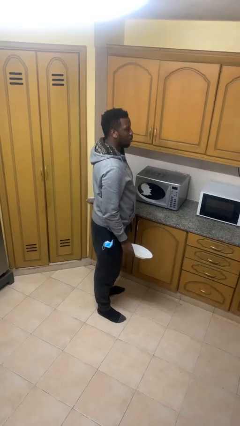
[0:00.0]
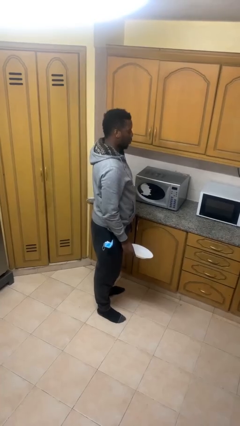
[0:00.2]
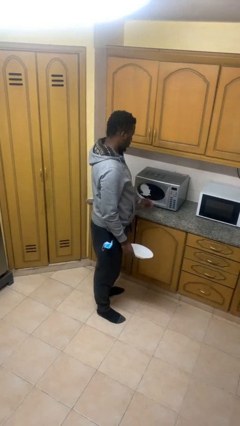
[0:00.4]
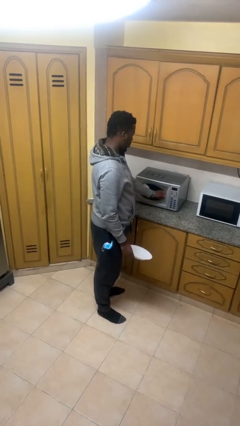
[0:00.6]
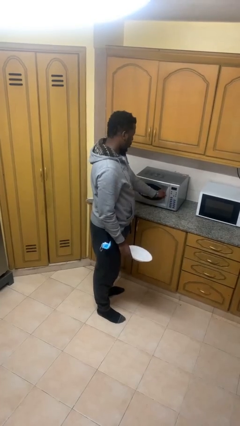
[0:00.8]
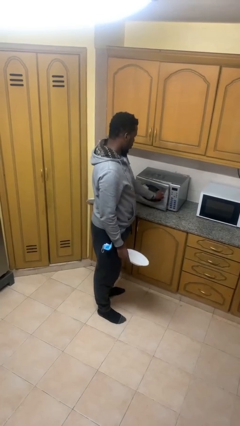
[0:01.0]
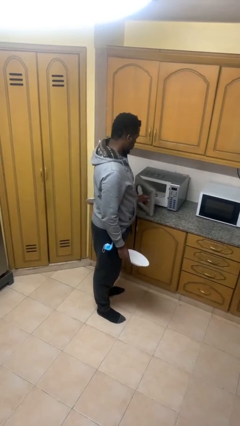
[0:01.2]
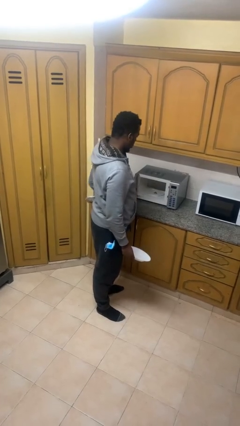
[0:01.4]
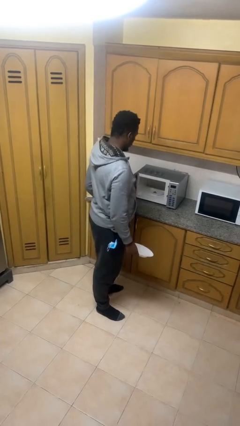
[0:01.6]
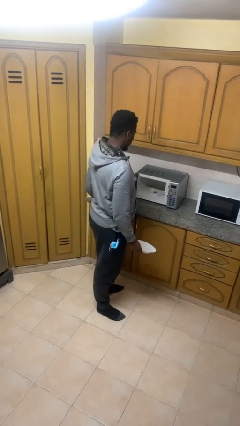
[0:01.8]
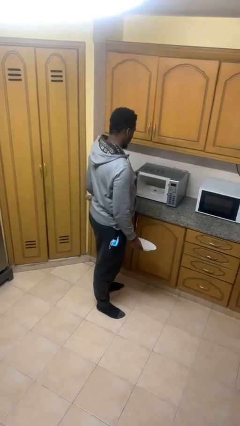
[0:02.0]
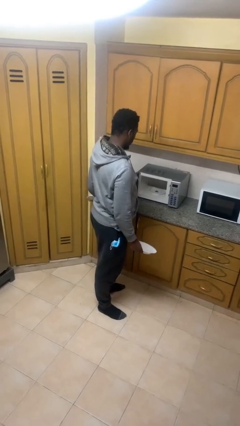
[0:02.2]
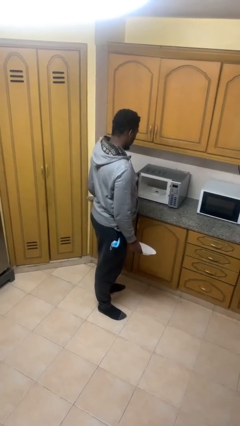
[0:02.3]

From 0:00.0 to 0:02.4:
person opens microwave

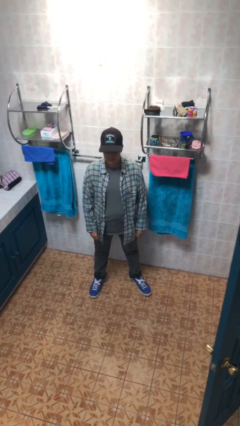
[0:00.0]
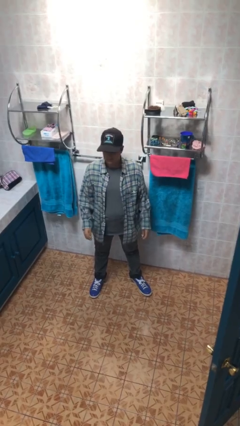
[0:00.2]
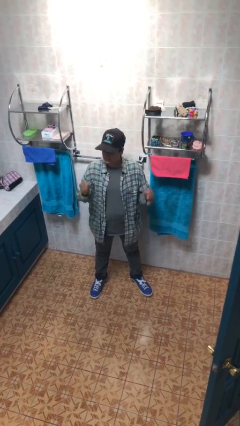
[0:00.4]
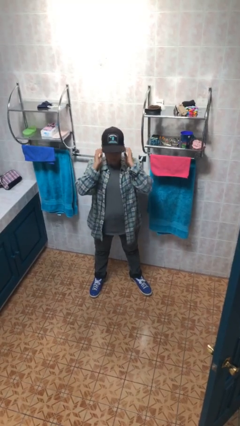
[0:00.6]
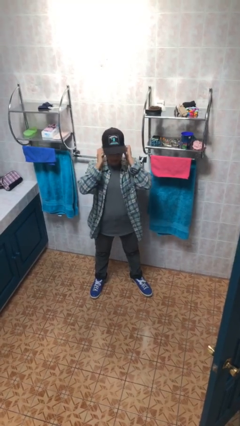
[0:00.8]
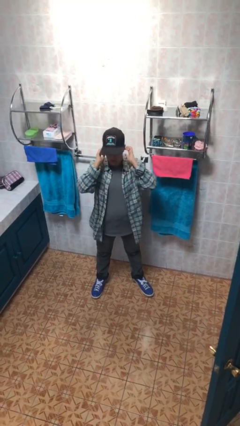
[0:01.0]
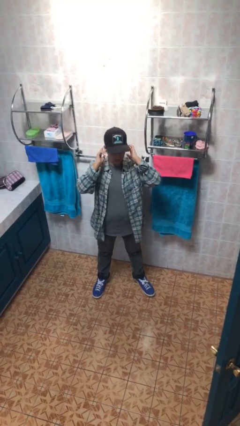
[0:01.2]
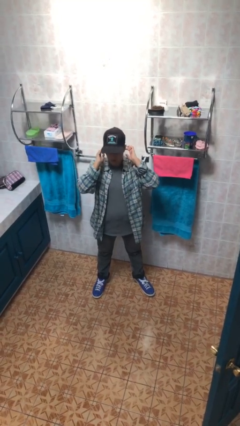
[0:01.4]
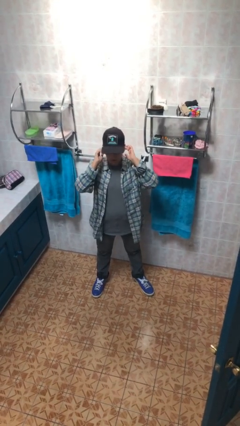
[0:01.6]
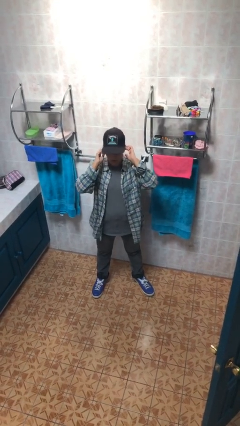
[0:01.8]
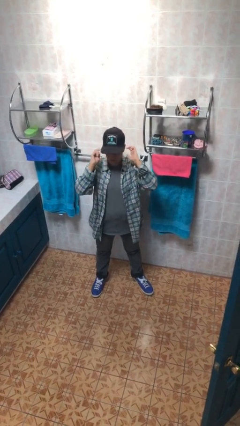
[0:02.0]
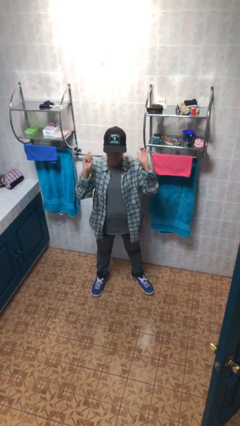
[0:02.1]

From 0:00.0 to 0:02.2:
person puts fingers in ear

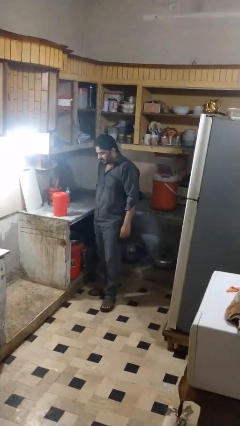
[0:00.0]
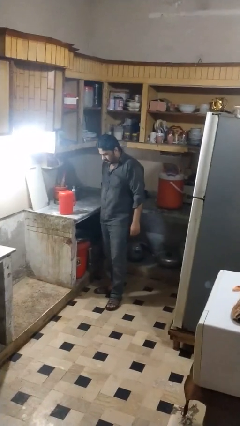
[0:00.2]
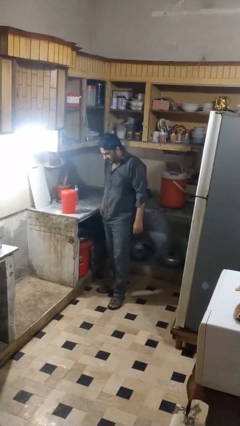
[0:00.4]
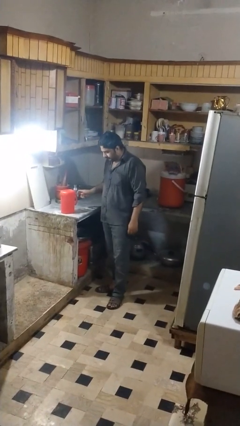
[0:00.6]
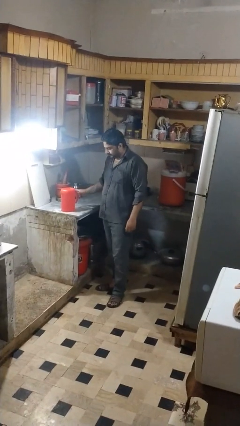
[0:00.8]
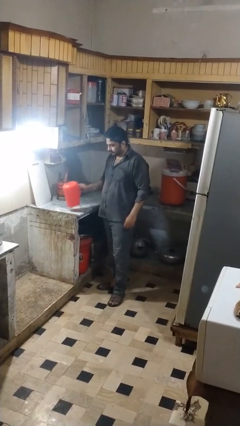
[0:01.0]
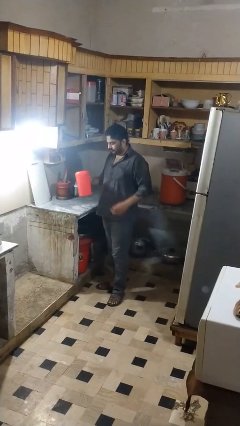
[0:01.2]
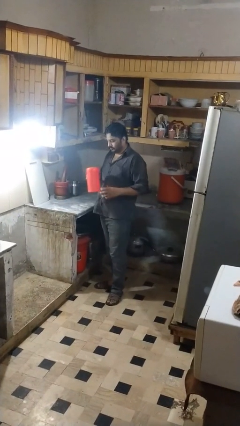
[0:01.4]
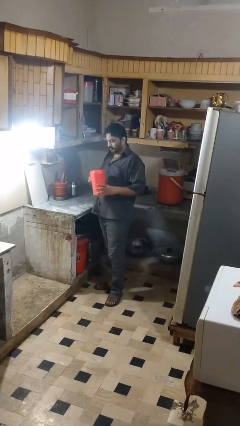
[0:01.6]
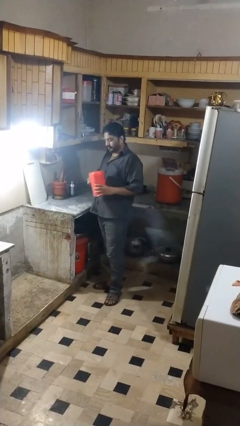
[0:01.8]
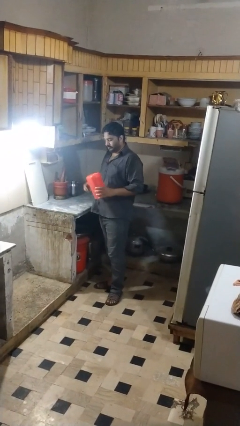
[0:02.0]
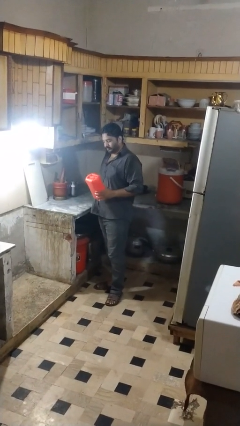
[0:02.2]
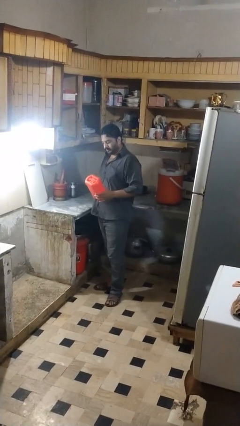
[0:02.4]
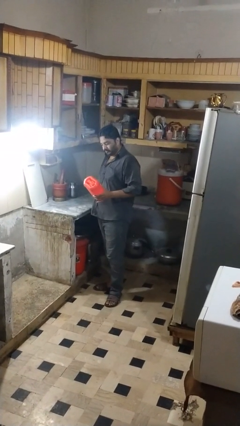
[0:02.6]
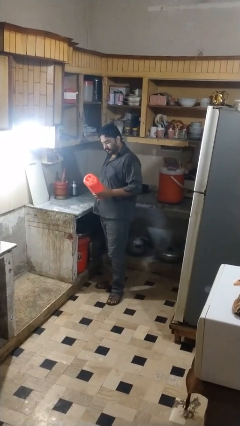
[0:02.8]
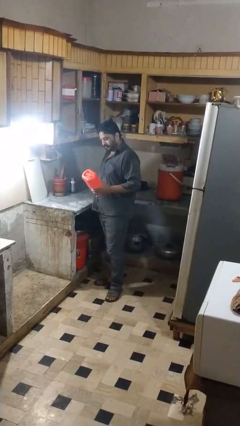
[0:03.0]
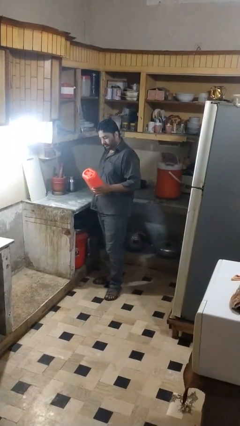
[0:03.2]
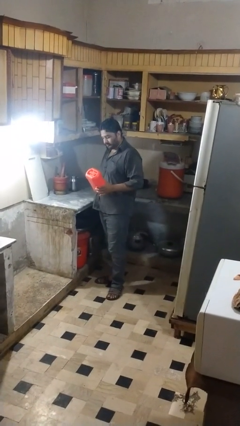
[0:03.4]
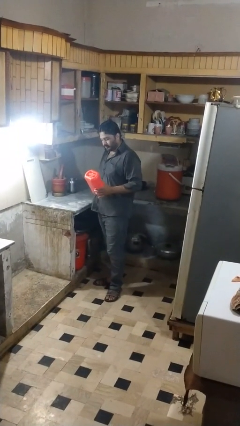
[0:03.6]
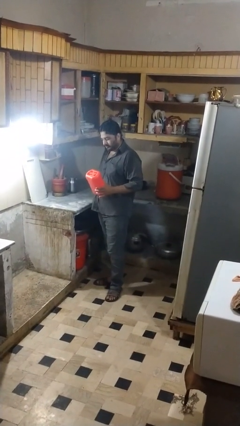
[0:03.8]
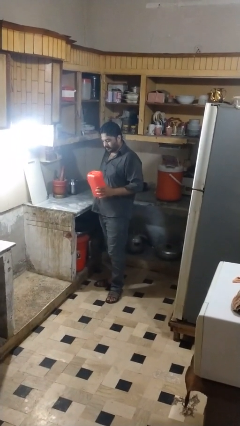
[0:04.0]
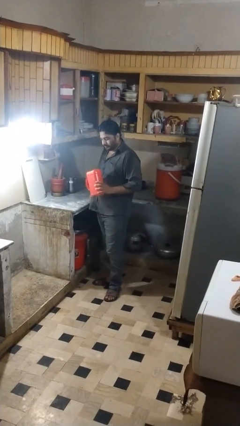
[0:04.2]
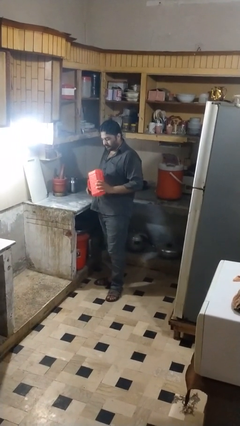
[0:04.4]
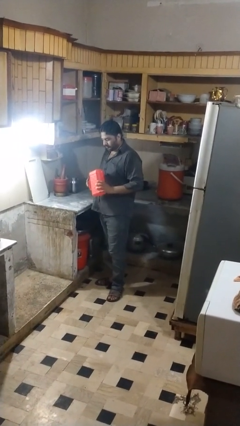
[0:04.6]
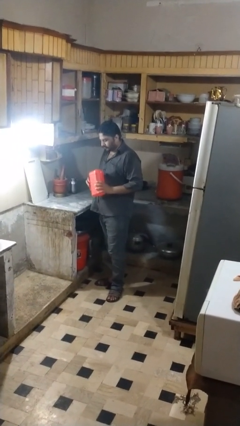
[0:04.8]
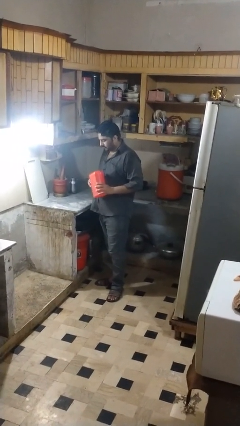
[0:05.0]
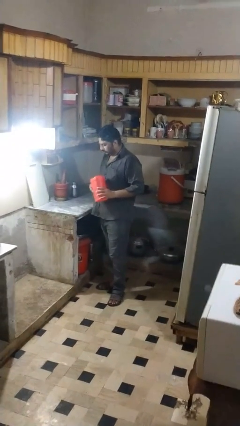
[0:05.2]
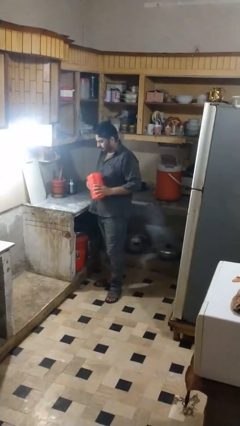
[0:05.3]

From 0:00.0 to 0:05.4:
person picks up object from countertop

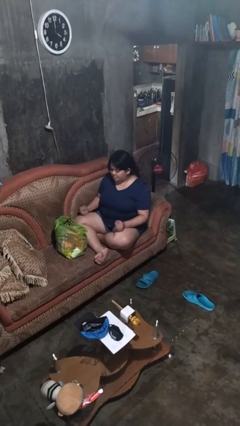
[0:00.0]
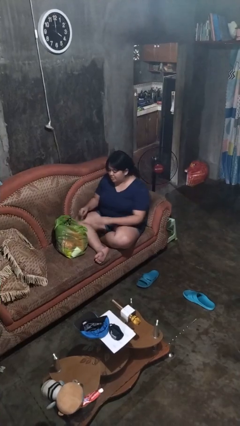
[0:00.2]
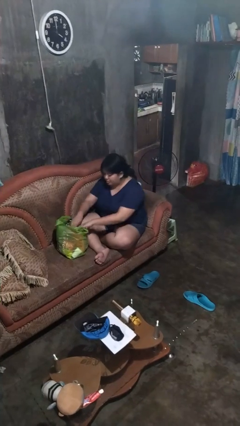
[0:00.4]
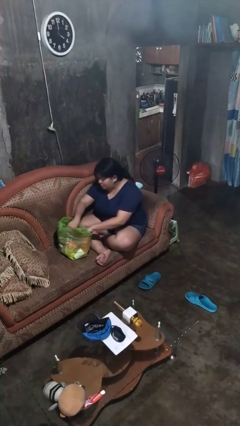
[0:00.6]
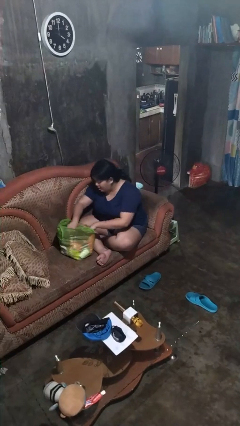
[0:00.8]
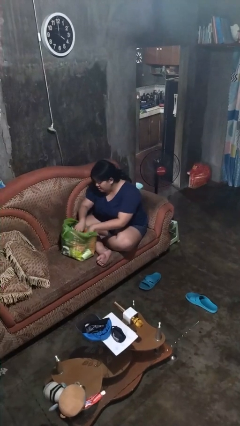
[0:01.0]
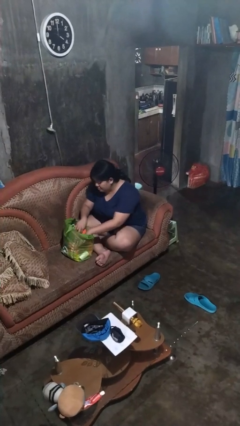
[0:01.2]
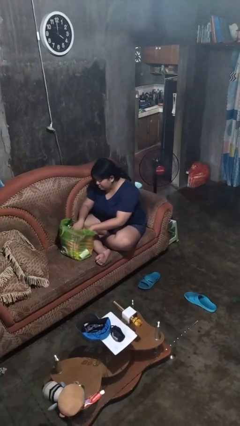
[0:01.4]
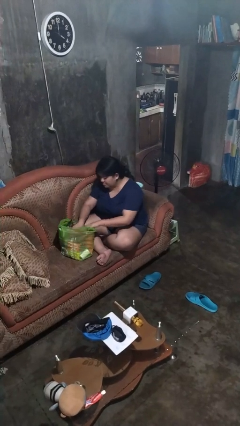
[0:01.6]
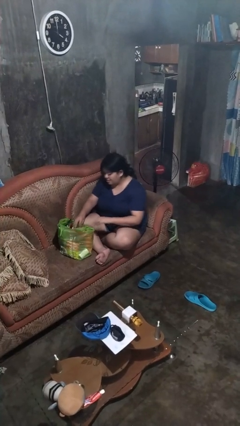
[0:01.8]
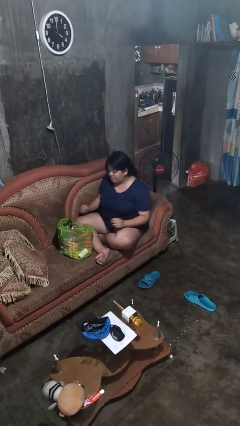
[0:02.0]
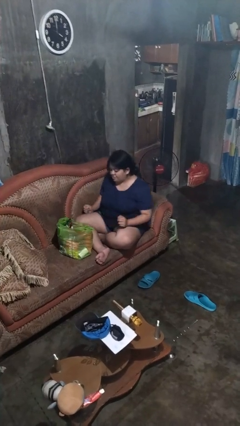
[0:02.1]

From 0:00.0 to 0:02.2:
person searches in bag

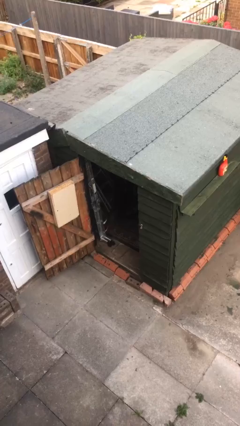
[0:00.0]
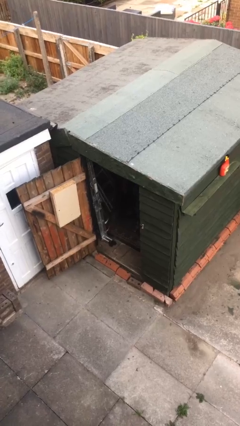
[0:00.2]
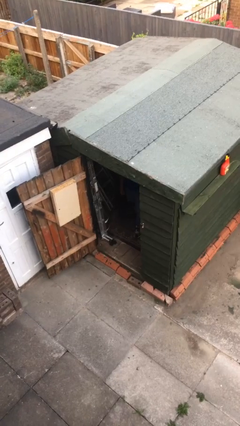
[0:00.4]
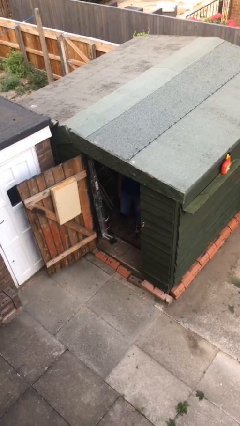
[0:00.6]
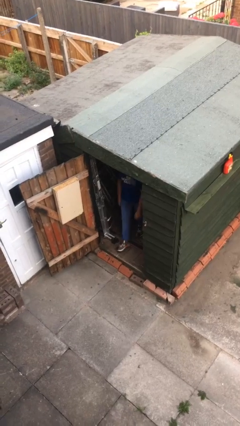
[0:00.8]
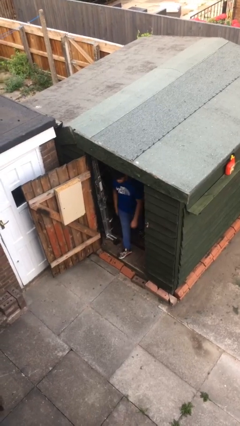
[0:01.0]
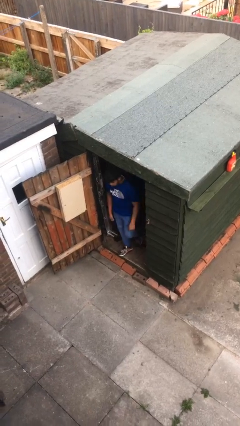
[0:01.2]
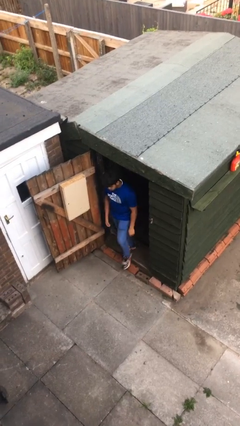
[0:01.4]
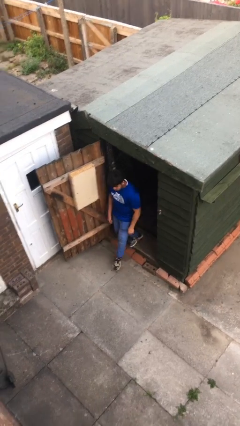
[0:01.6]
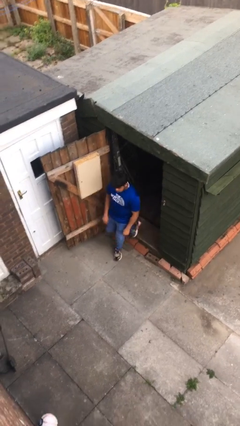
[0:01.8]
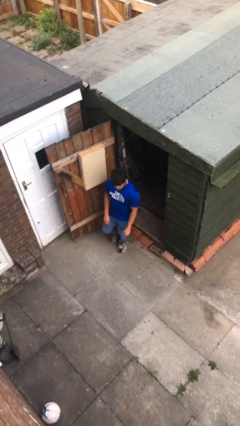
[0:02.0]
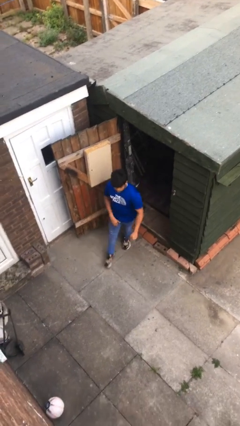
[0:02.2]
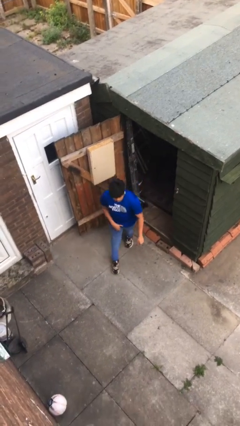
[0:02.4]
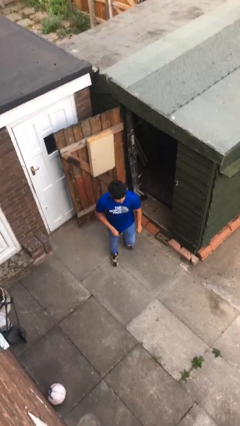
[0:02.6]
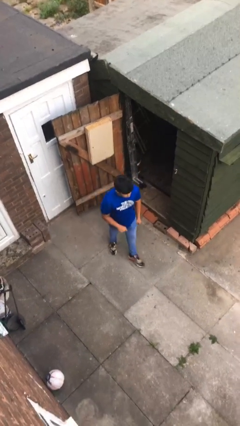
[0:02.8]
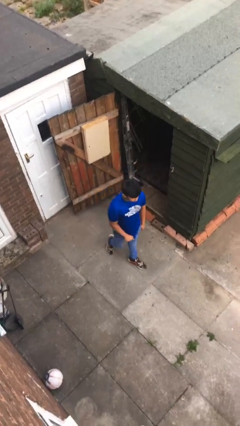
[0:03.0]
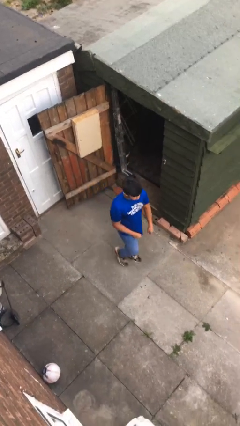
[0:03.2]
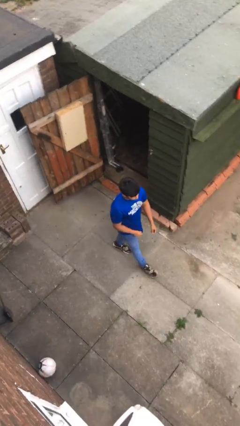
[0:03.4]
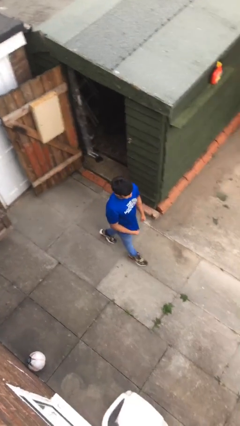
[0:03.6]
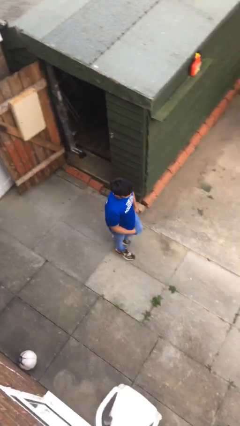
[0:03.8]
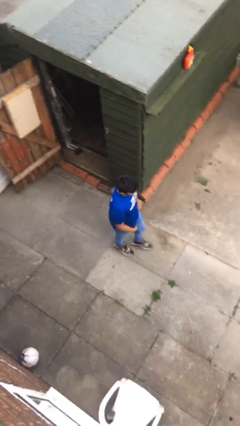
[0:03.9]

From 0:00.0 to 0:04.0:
person enters scene through structure

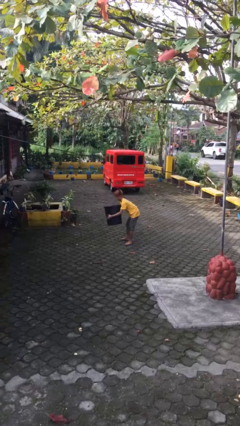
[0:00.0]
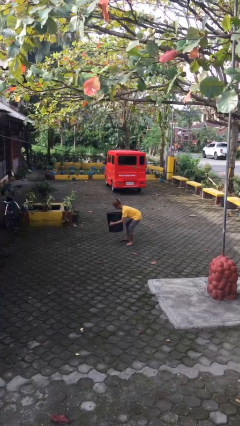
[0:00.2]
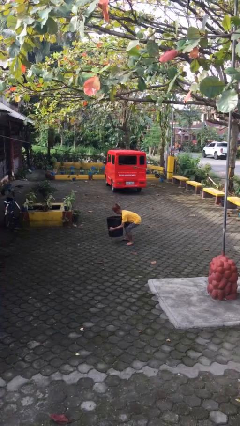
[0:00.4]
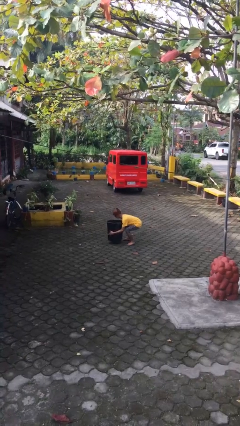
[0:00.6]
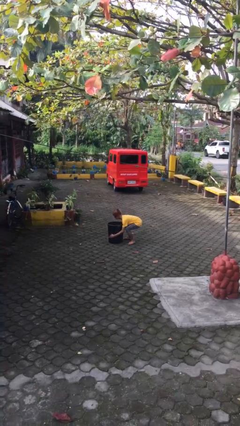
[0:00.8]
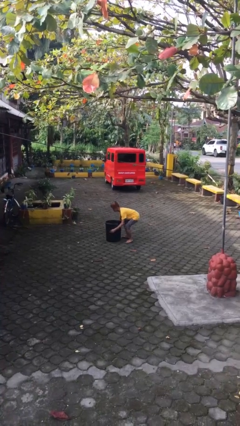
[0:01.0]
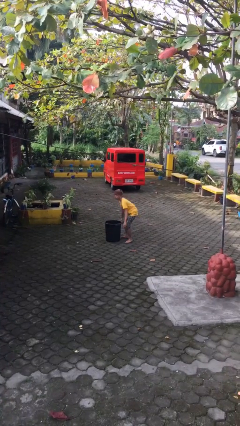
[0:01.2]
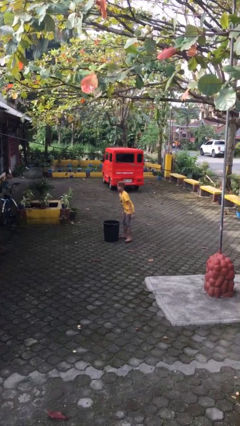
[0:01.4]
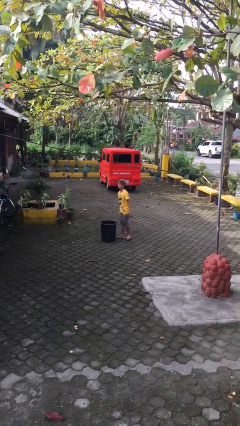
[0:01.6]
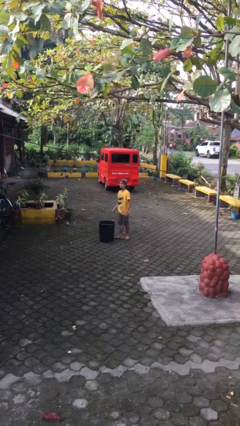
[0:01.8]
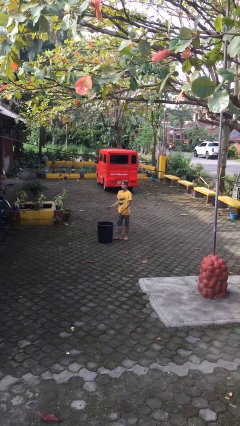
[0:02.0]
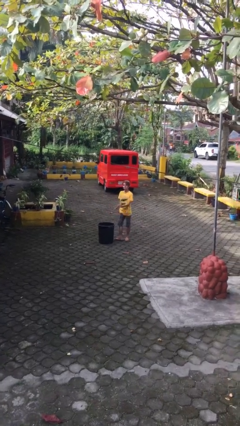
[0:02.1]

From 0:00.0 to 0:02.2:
person puts down object on floor
